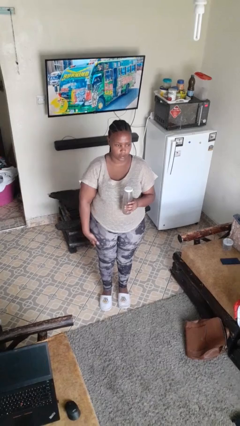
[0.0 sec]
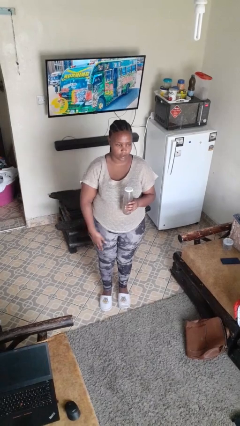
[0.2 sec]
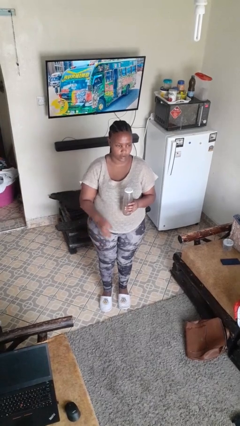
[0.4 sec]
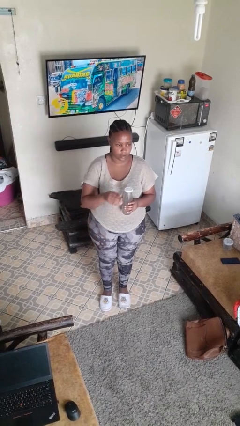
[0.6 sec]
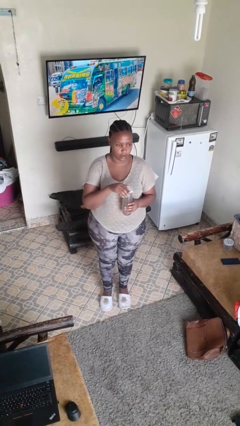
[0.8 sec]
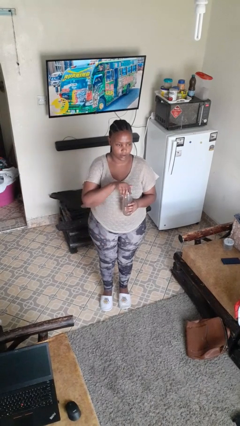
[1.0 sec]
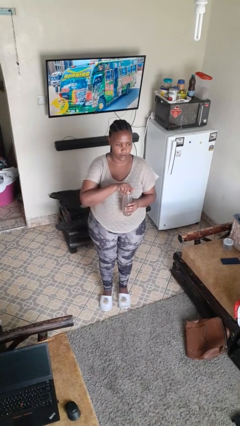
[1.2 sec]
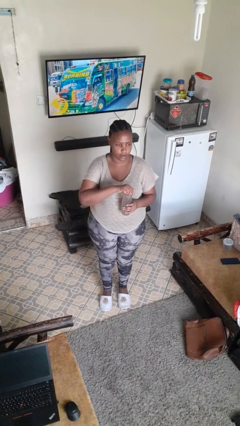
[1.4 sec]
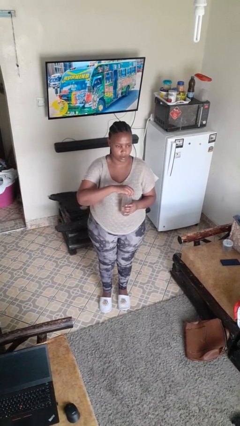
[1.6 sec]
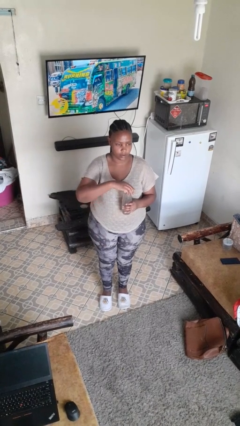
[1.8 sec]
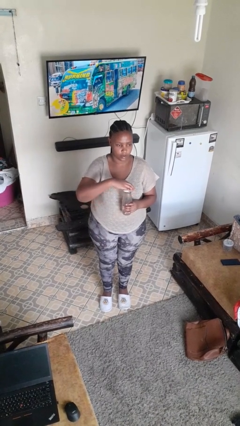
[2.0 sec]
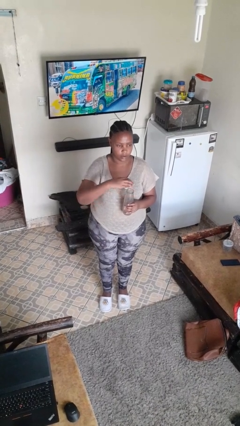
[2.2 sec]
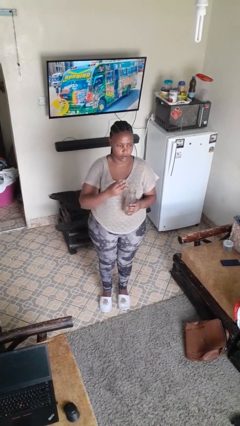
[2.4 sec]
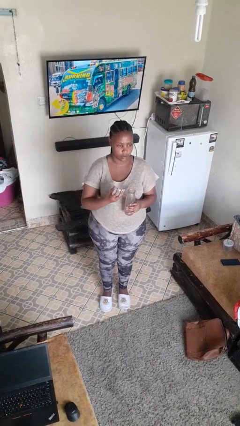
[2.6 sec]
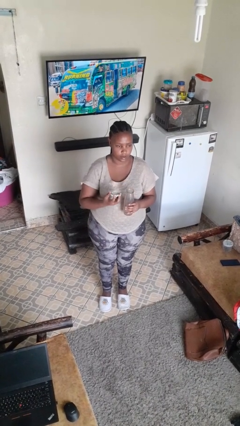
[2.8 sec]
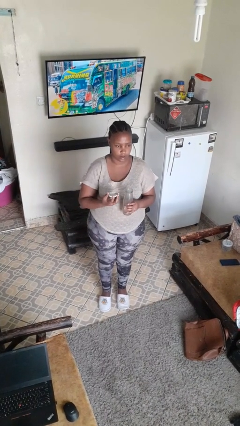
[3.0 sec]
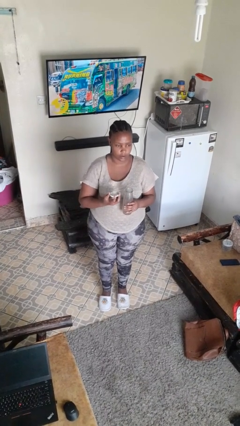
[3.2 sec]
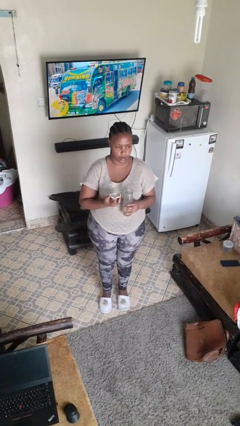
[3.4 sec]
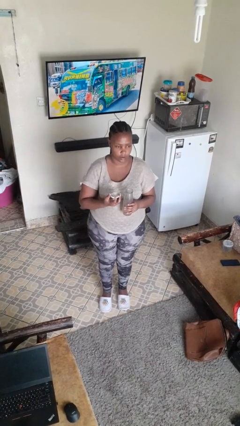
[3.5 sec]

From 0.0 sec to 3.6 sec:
person unscrews lid from bottle

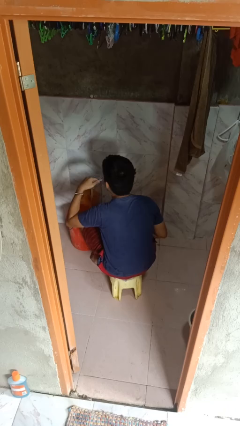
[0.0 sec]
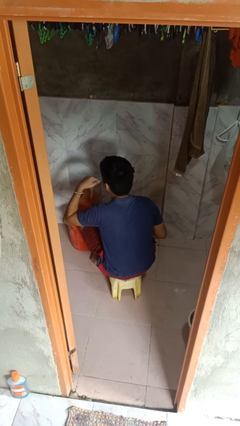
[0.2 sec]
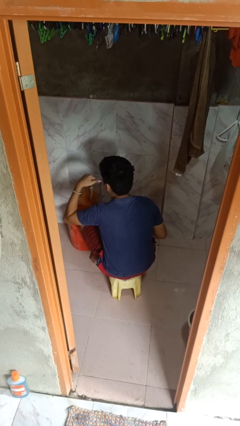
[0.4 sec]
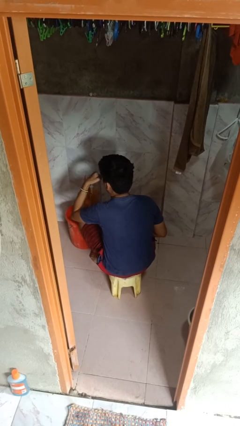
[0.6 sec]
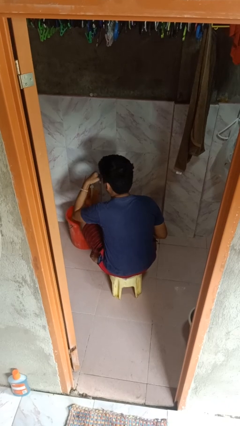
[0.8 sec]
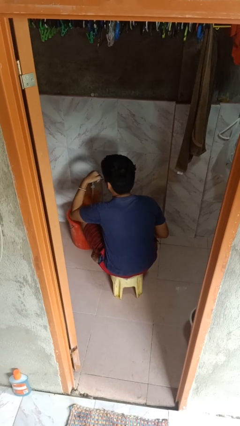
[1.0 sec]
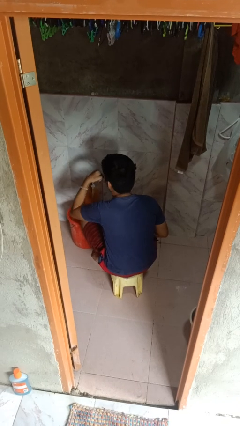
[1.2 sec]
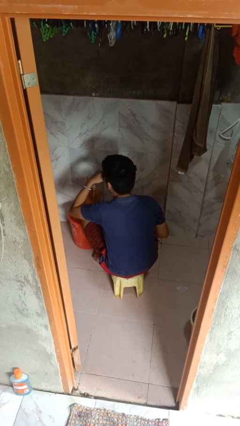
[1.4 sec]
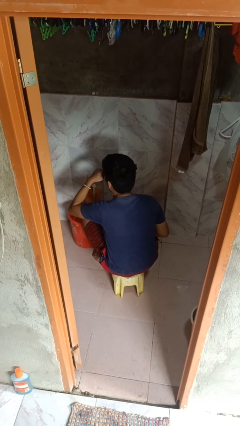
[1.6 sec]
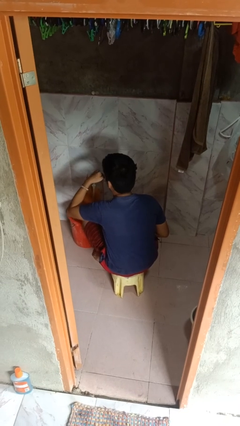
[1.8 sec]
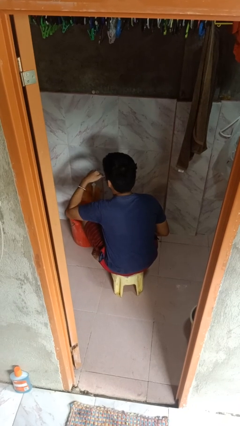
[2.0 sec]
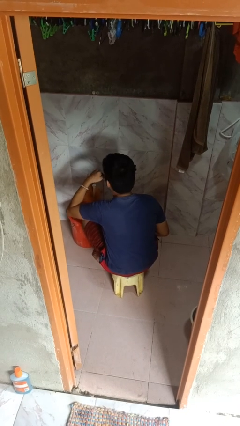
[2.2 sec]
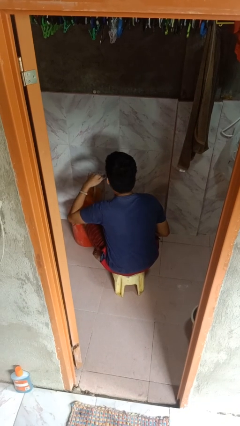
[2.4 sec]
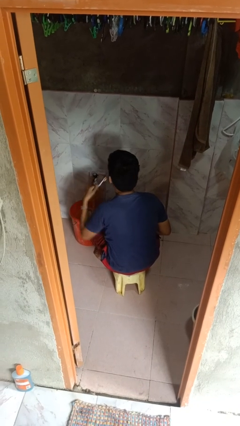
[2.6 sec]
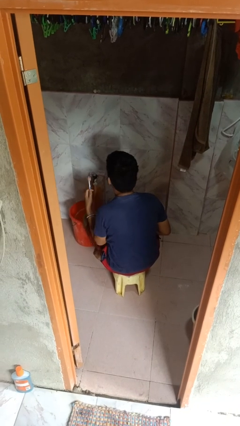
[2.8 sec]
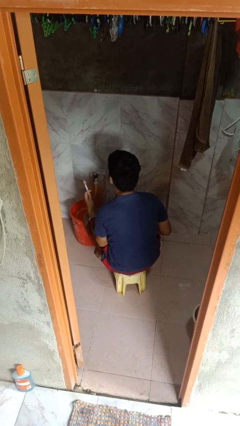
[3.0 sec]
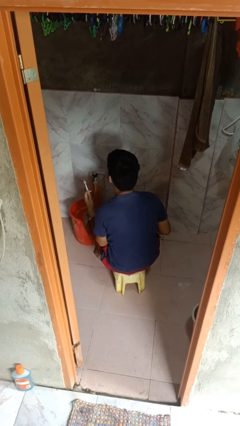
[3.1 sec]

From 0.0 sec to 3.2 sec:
person brushes teeth

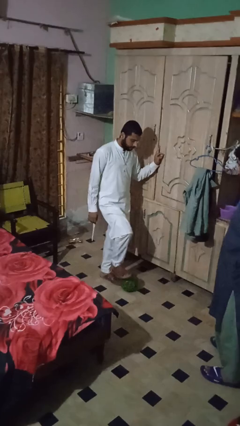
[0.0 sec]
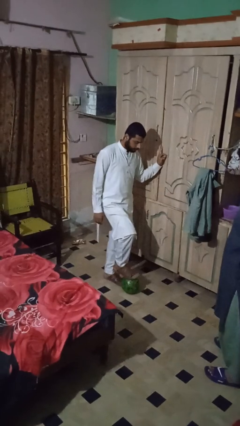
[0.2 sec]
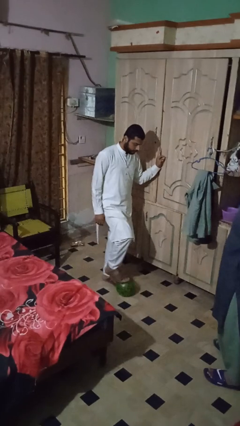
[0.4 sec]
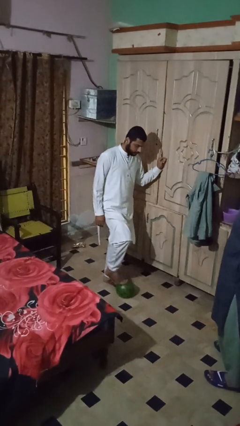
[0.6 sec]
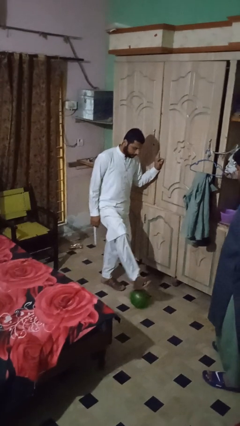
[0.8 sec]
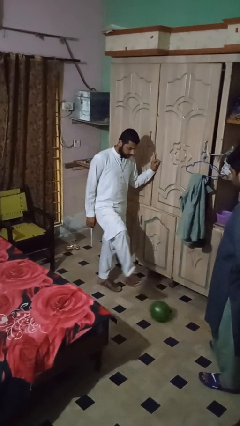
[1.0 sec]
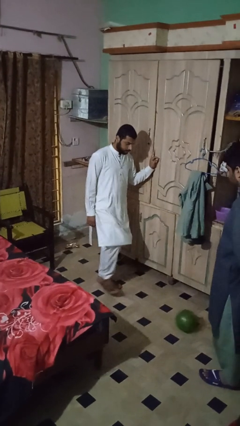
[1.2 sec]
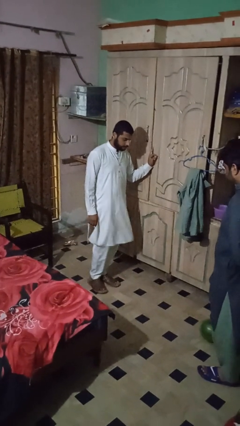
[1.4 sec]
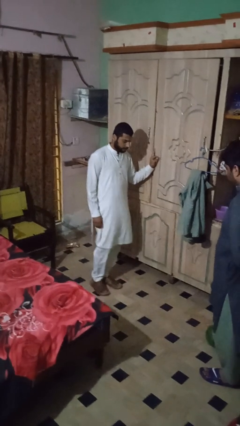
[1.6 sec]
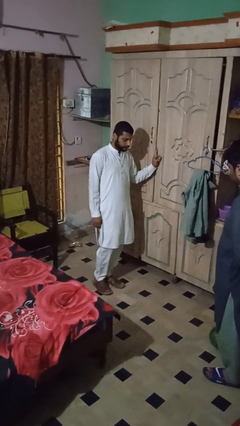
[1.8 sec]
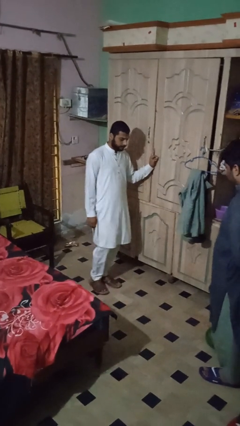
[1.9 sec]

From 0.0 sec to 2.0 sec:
person kicks object to person

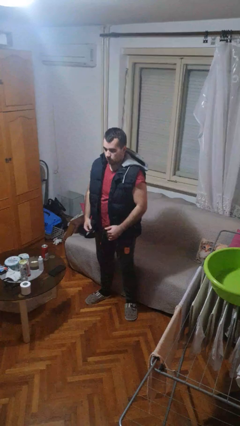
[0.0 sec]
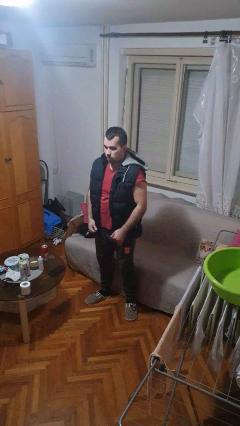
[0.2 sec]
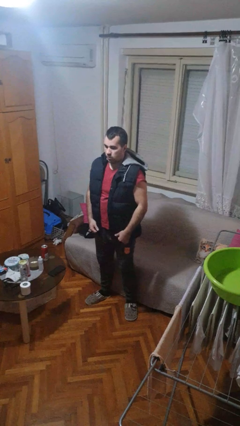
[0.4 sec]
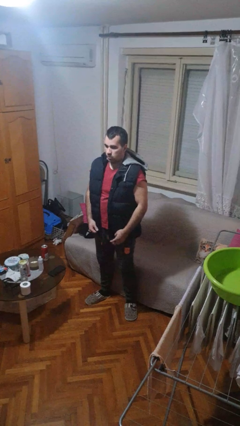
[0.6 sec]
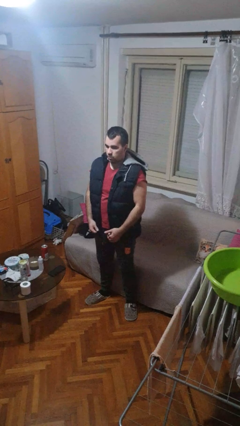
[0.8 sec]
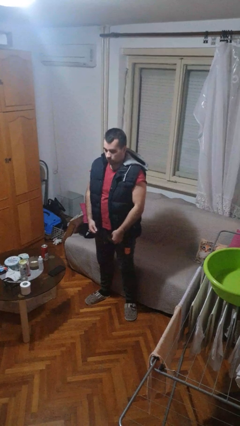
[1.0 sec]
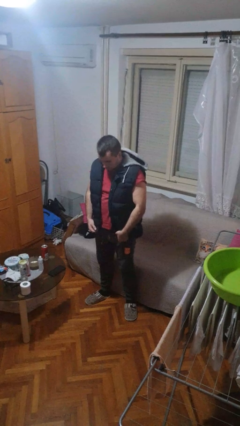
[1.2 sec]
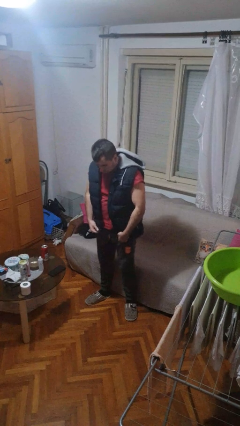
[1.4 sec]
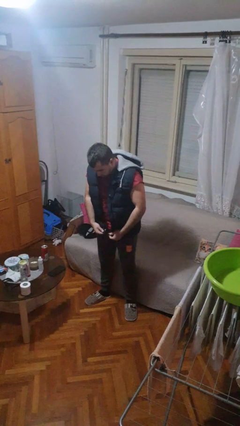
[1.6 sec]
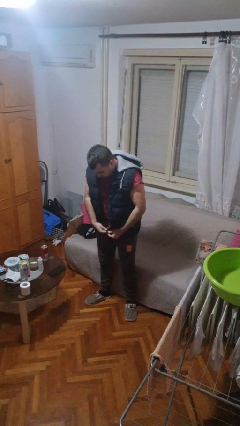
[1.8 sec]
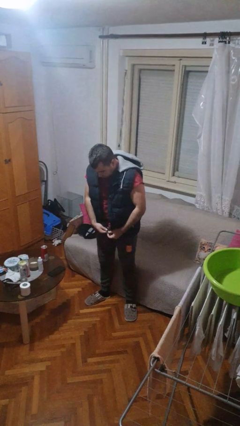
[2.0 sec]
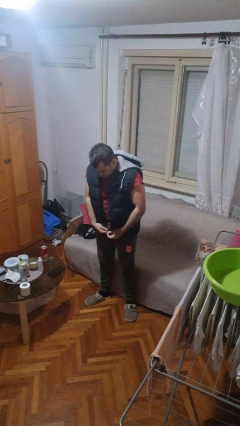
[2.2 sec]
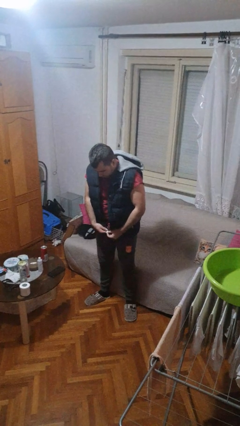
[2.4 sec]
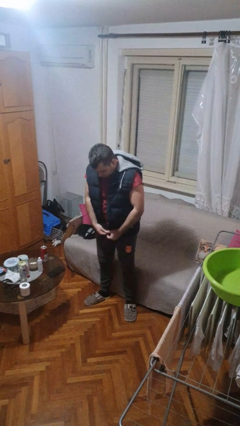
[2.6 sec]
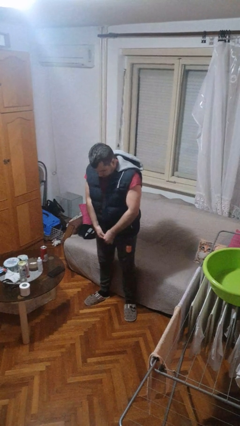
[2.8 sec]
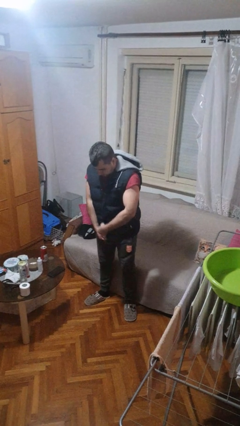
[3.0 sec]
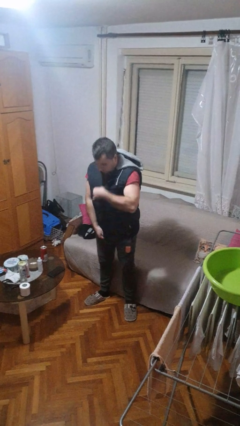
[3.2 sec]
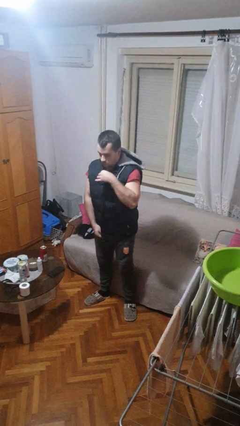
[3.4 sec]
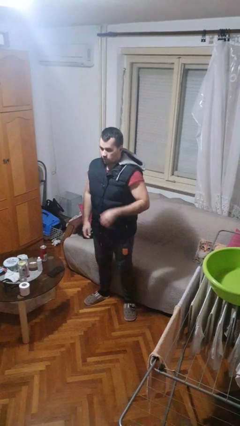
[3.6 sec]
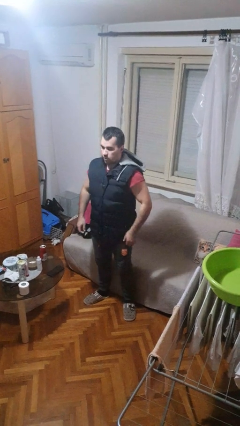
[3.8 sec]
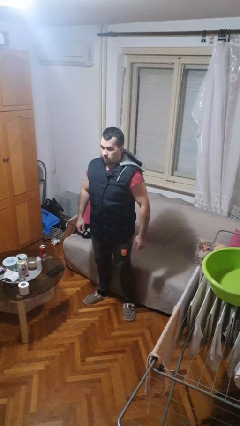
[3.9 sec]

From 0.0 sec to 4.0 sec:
person zips up jacket

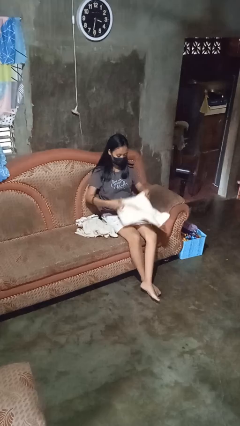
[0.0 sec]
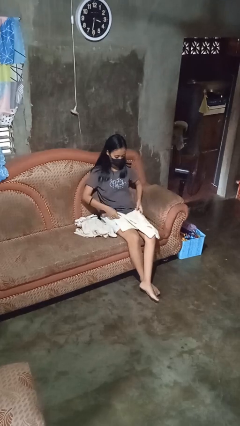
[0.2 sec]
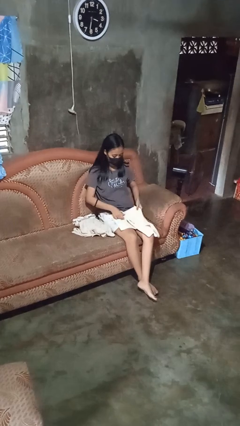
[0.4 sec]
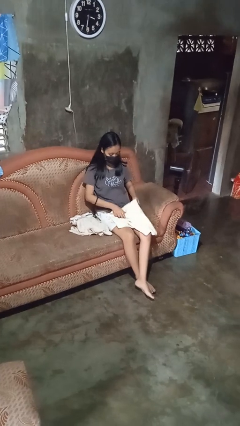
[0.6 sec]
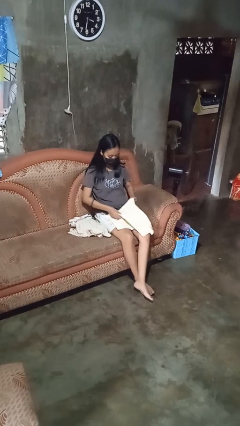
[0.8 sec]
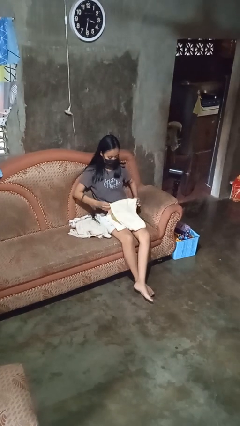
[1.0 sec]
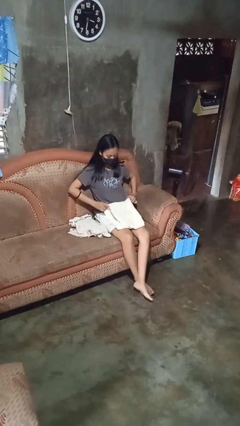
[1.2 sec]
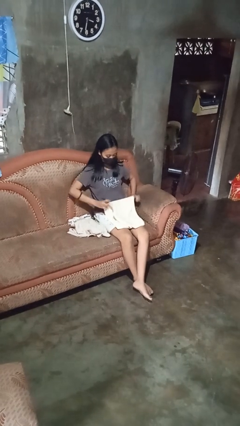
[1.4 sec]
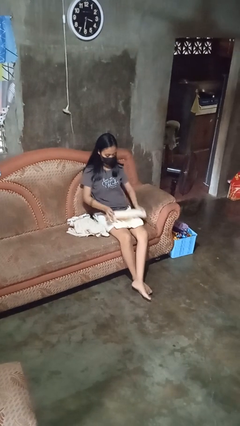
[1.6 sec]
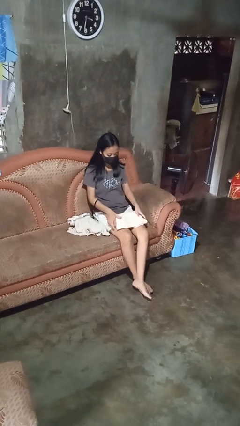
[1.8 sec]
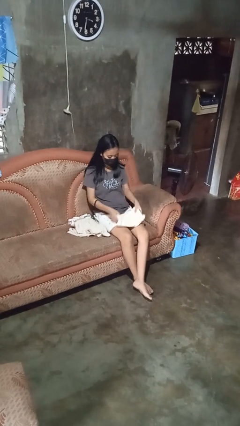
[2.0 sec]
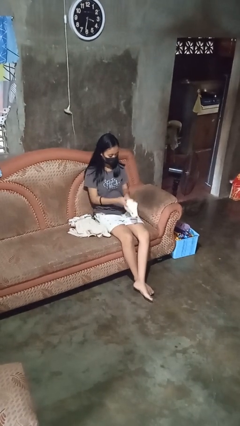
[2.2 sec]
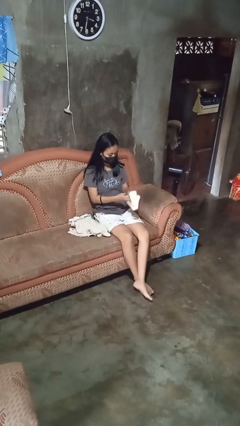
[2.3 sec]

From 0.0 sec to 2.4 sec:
person folds towel

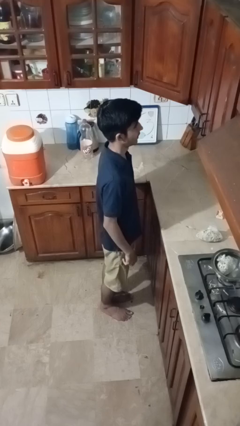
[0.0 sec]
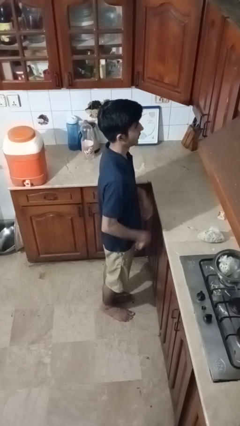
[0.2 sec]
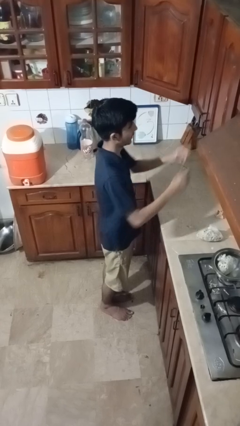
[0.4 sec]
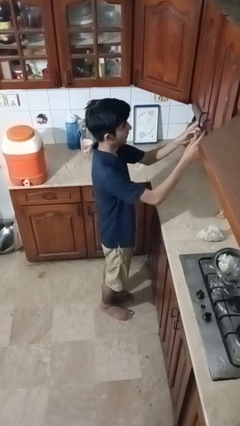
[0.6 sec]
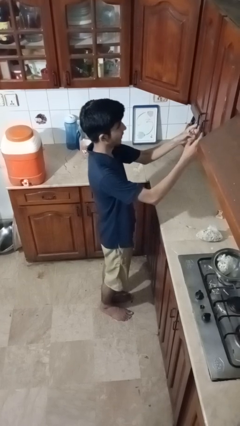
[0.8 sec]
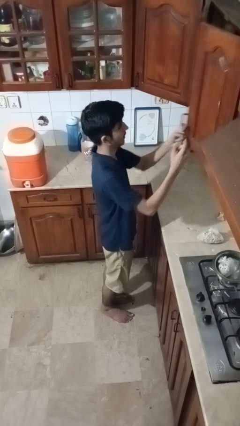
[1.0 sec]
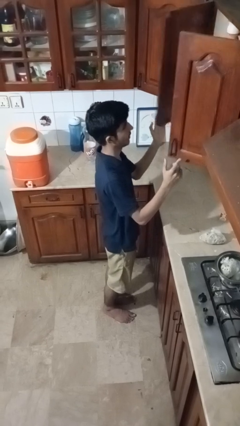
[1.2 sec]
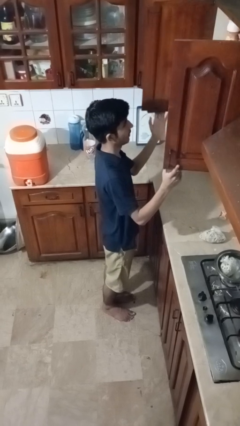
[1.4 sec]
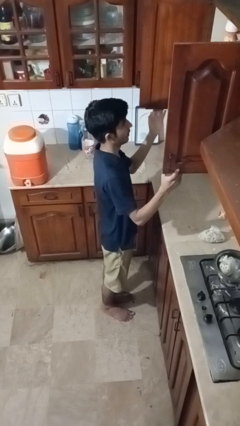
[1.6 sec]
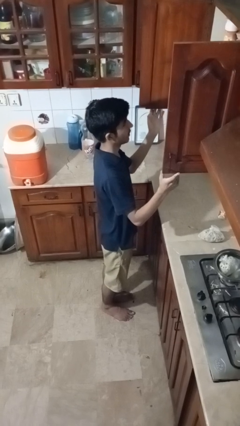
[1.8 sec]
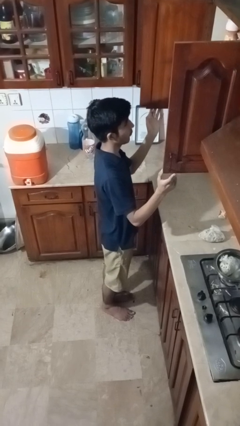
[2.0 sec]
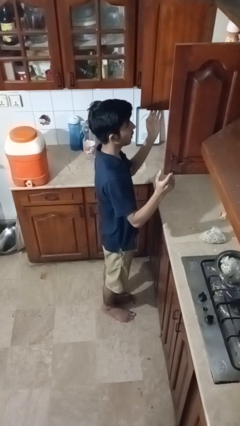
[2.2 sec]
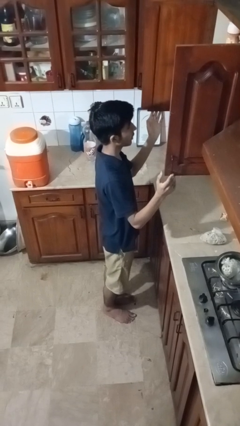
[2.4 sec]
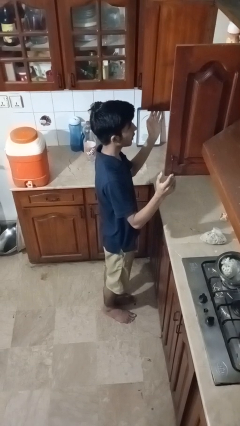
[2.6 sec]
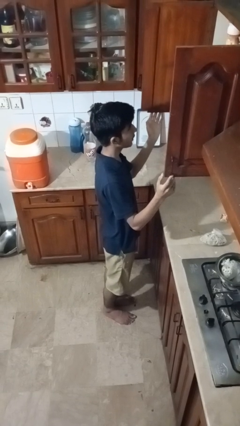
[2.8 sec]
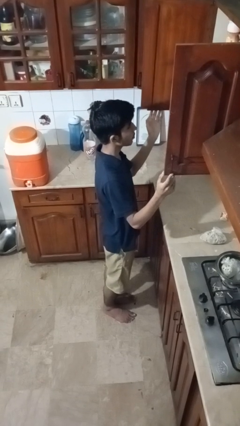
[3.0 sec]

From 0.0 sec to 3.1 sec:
person opens cabinet
